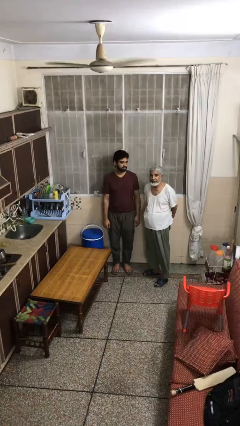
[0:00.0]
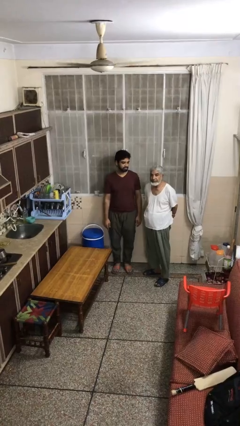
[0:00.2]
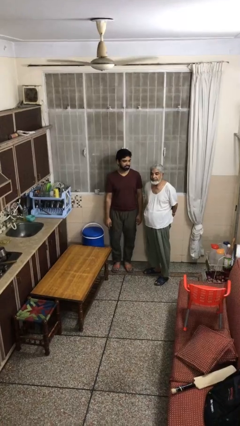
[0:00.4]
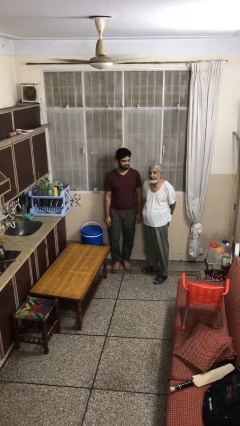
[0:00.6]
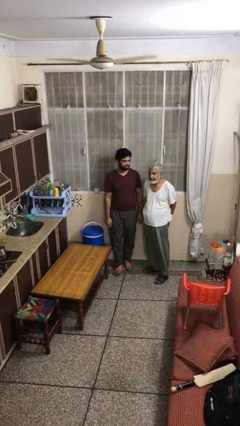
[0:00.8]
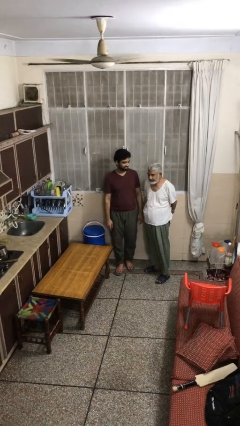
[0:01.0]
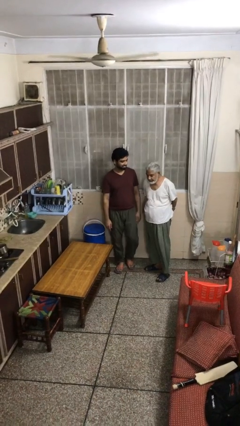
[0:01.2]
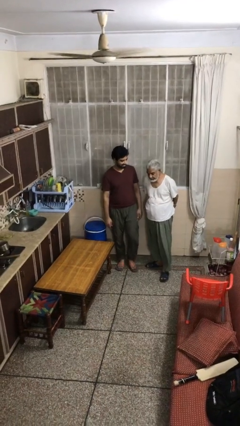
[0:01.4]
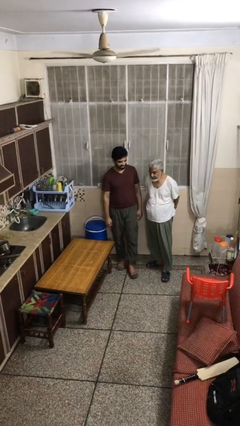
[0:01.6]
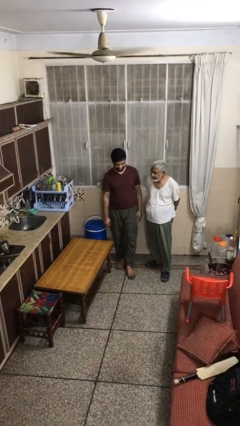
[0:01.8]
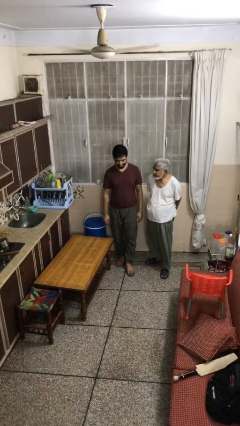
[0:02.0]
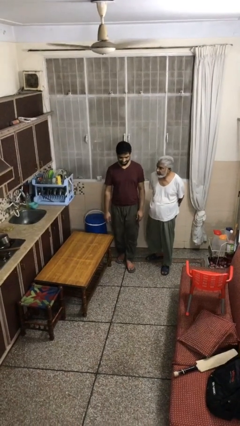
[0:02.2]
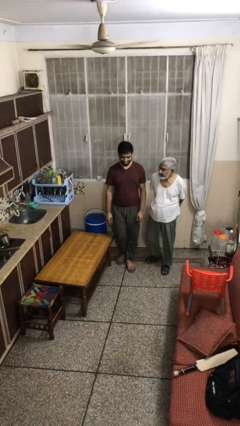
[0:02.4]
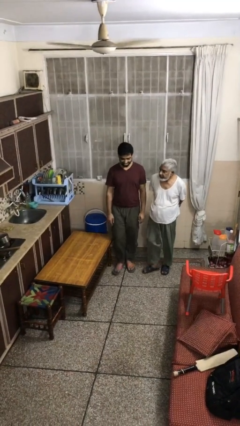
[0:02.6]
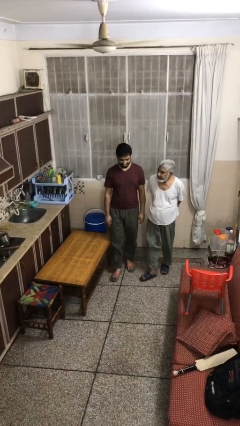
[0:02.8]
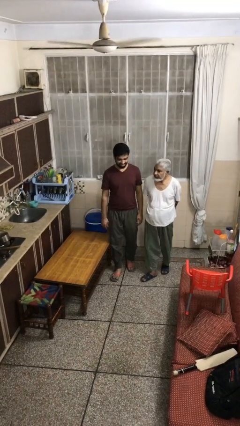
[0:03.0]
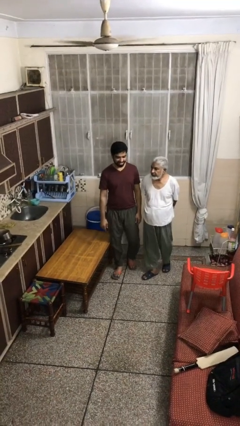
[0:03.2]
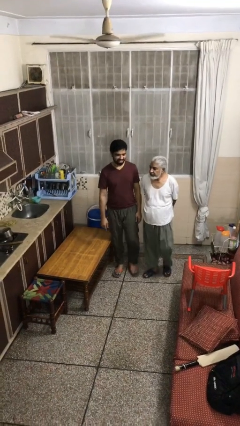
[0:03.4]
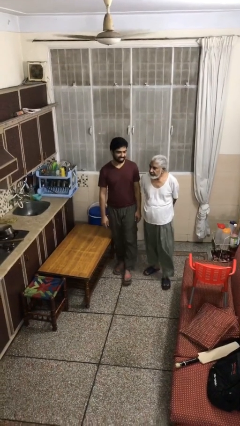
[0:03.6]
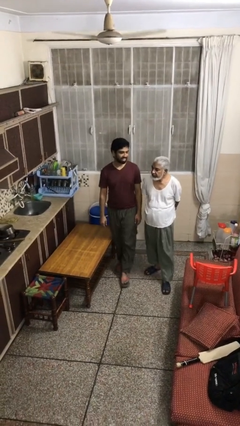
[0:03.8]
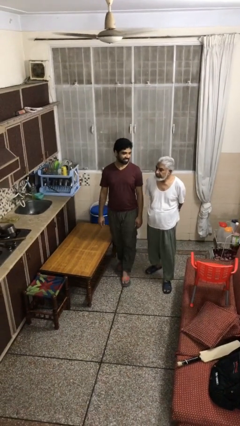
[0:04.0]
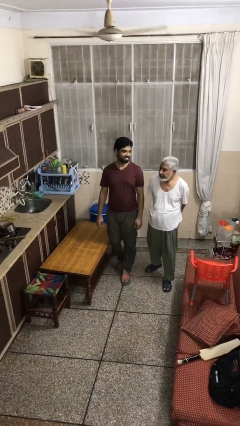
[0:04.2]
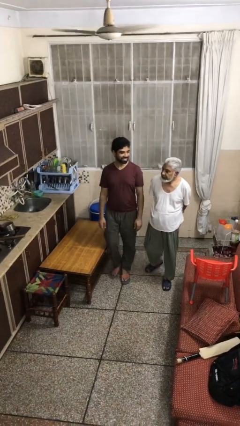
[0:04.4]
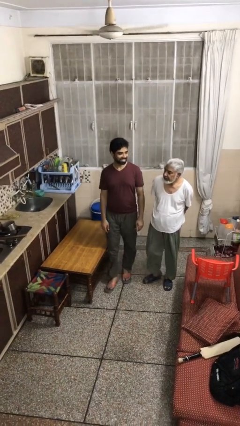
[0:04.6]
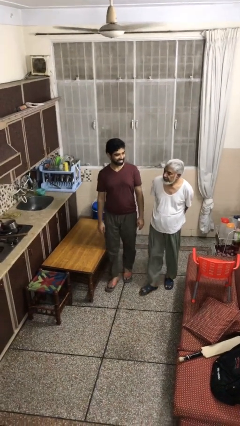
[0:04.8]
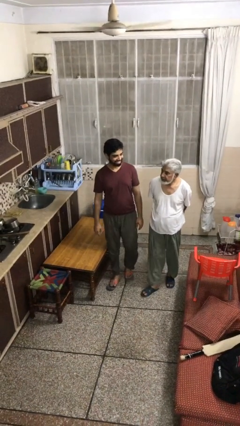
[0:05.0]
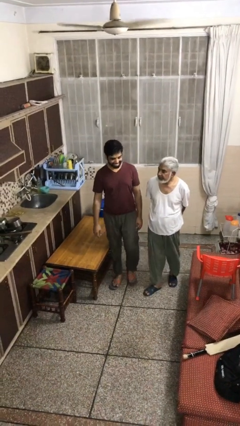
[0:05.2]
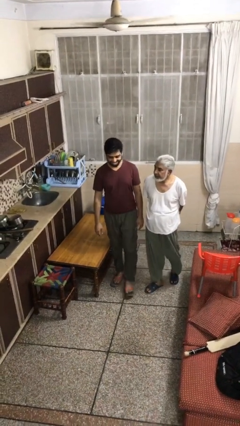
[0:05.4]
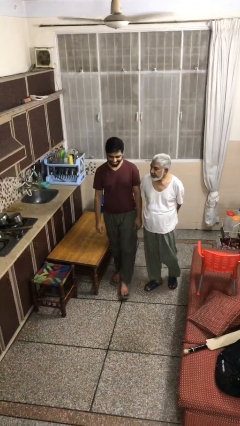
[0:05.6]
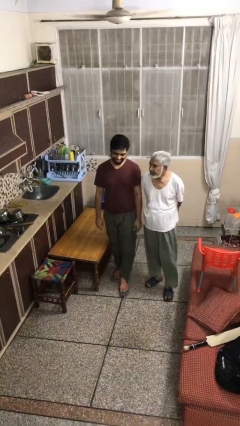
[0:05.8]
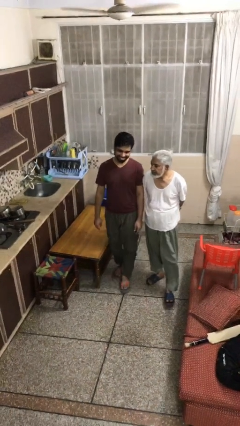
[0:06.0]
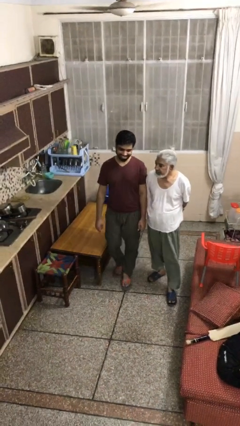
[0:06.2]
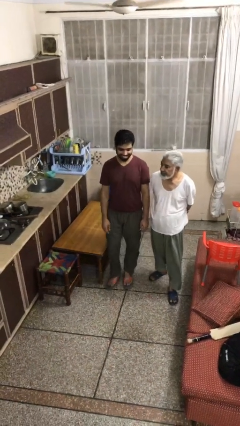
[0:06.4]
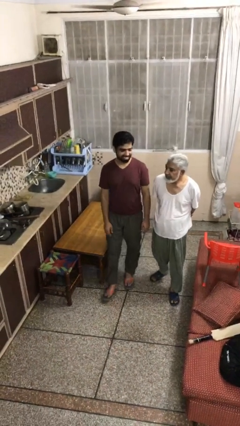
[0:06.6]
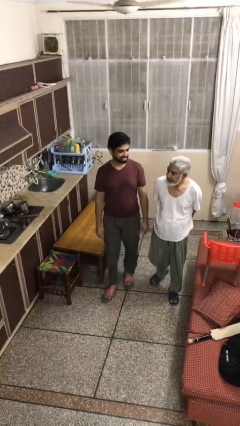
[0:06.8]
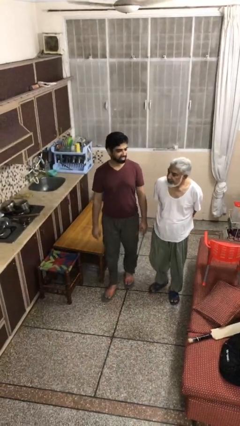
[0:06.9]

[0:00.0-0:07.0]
person talks to person

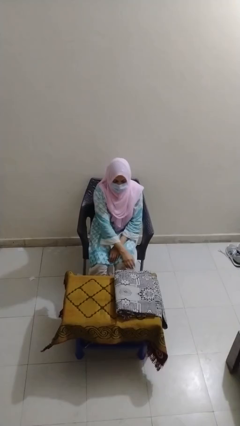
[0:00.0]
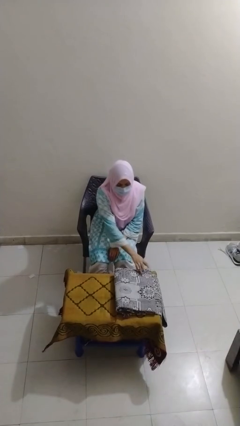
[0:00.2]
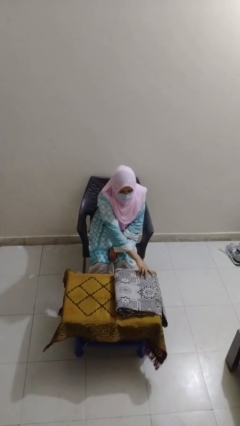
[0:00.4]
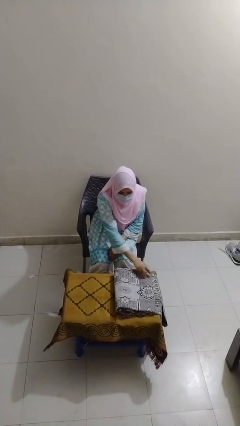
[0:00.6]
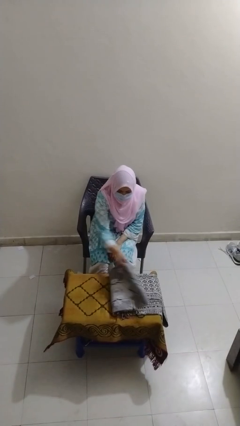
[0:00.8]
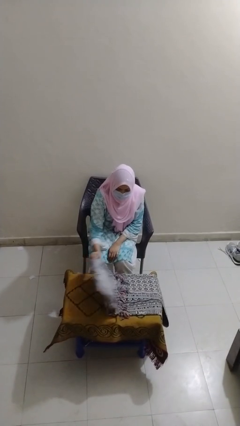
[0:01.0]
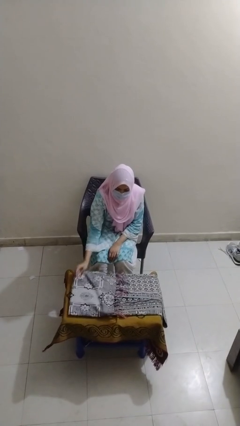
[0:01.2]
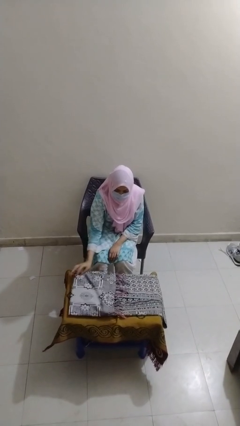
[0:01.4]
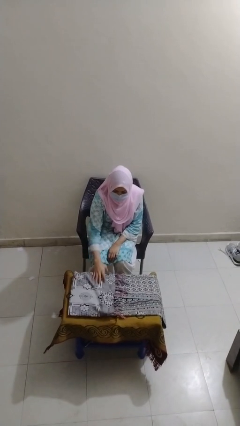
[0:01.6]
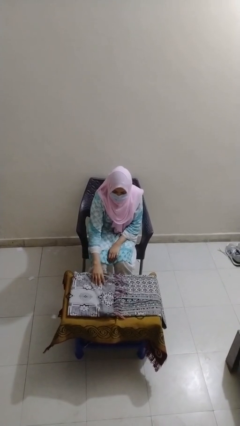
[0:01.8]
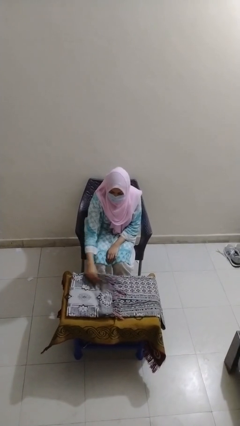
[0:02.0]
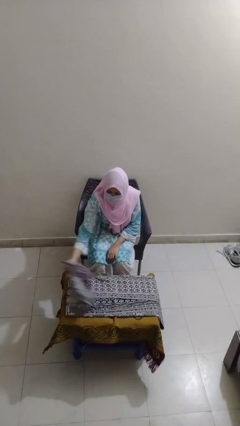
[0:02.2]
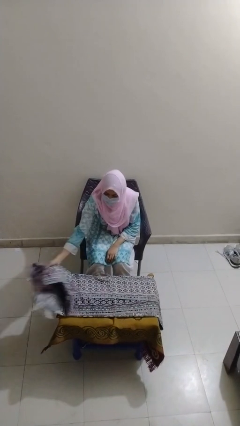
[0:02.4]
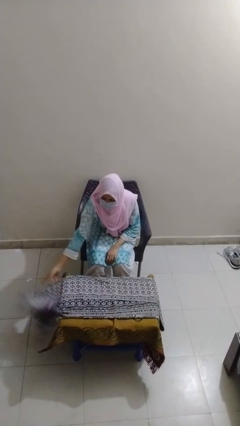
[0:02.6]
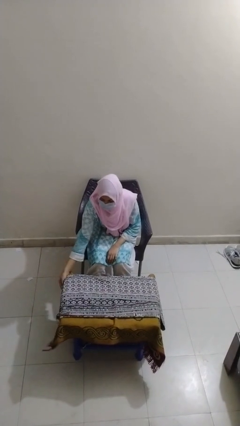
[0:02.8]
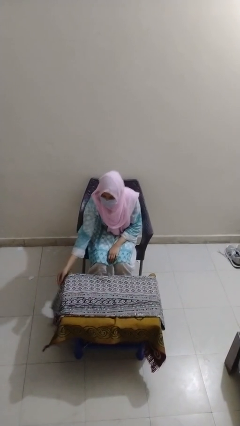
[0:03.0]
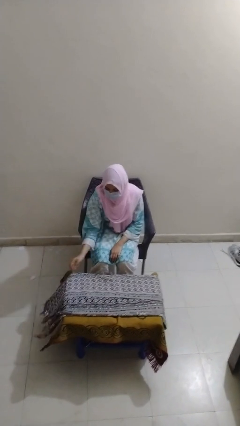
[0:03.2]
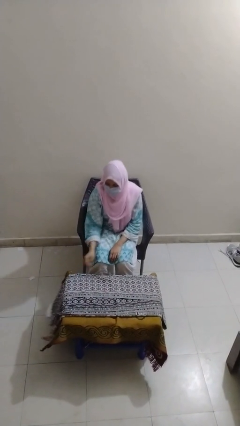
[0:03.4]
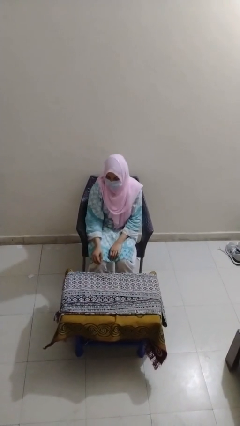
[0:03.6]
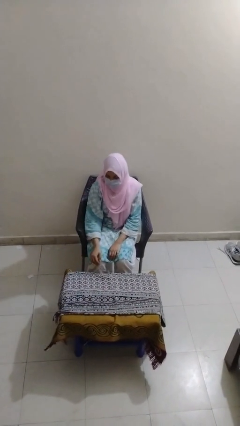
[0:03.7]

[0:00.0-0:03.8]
person unfolds blanket

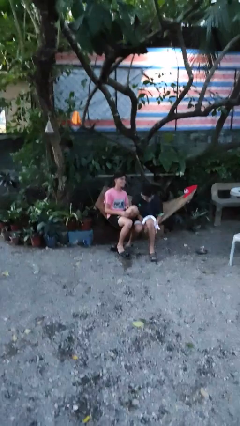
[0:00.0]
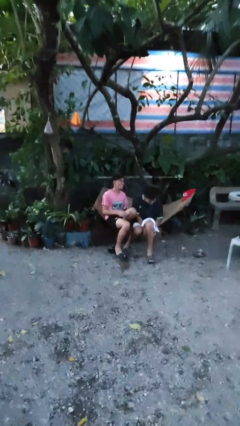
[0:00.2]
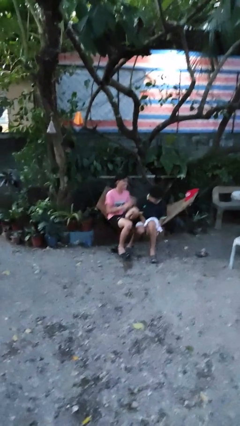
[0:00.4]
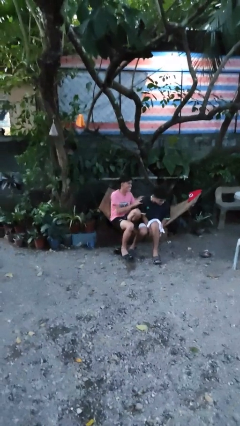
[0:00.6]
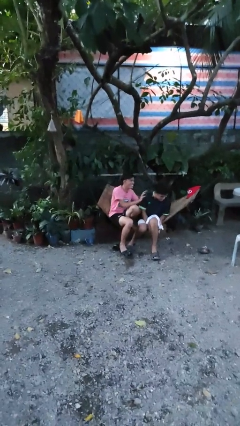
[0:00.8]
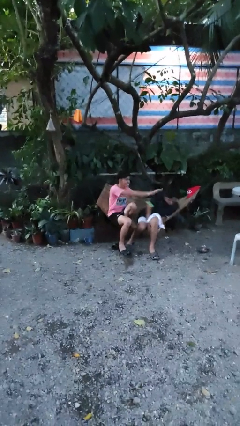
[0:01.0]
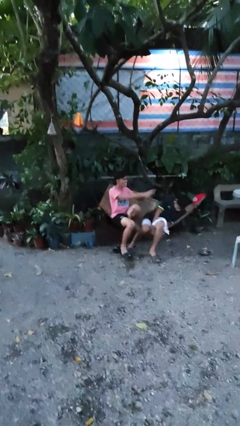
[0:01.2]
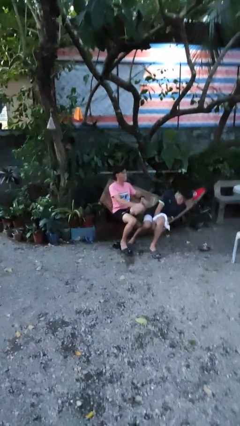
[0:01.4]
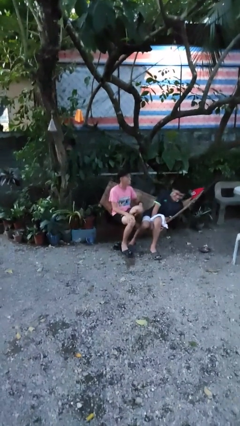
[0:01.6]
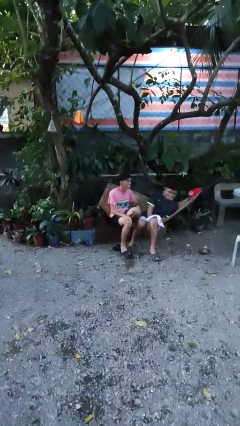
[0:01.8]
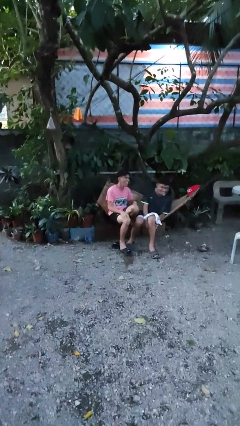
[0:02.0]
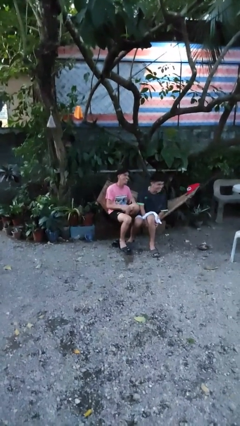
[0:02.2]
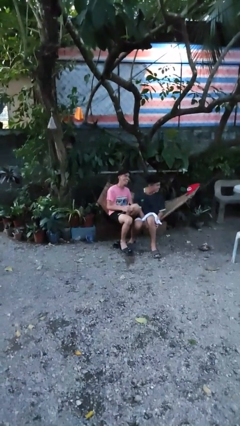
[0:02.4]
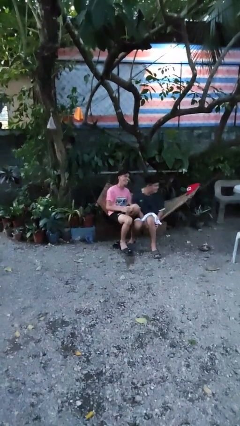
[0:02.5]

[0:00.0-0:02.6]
person shoves person

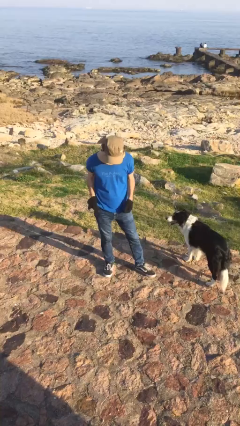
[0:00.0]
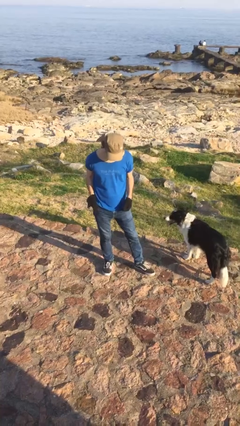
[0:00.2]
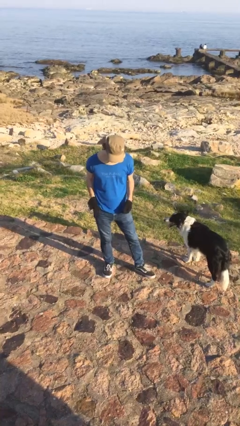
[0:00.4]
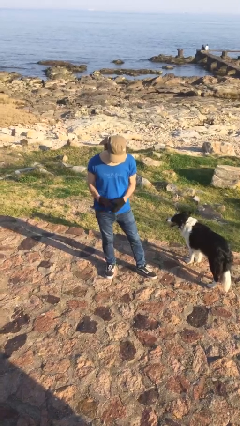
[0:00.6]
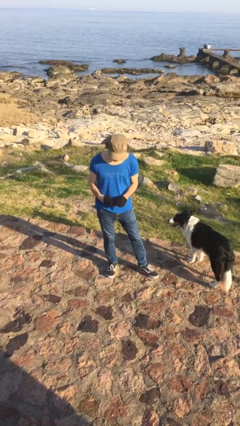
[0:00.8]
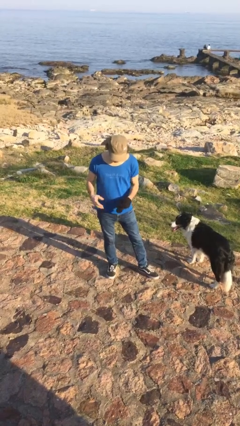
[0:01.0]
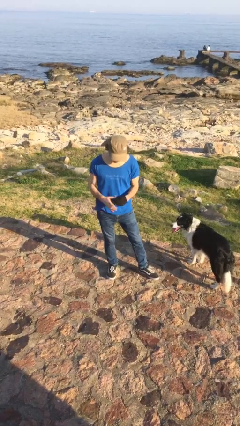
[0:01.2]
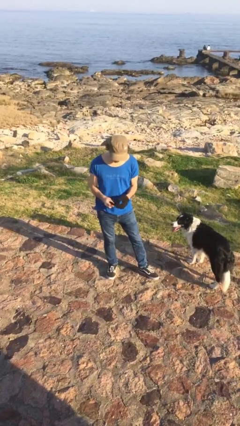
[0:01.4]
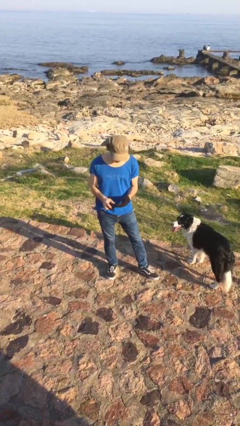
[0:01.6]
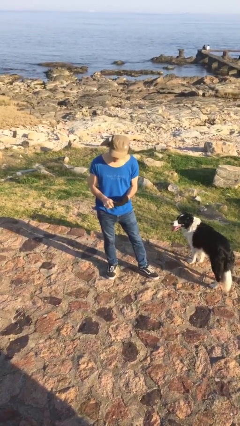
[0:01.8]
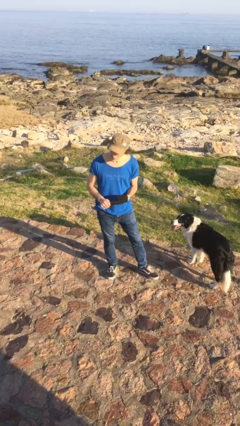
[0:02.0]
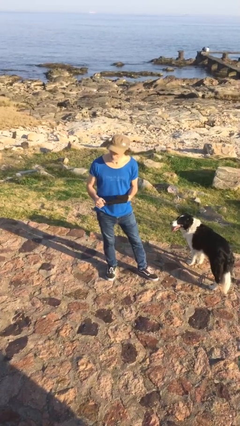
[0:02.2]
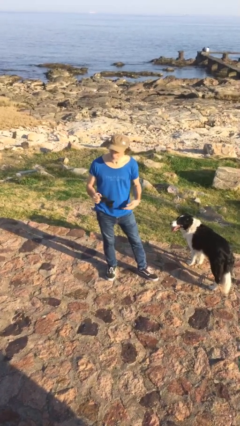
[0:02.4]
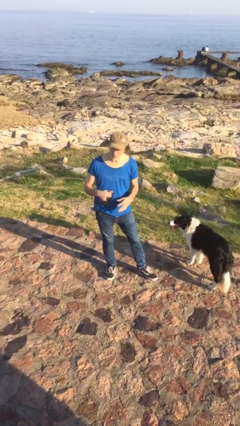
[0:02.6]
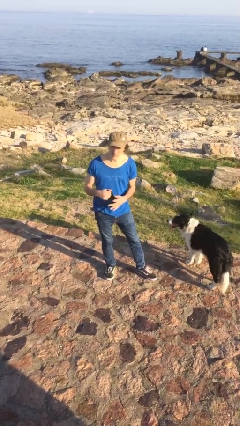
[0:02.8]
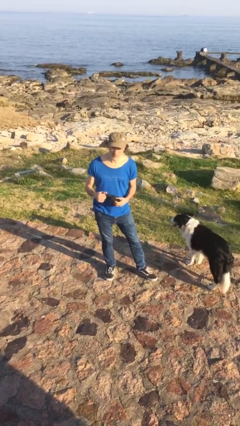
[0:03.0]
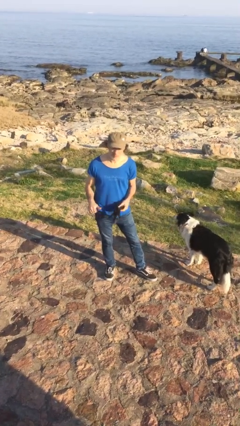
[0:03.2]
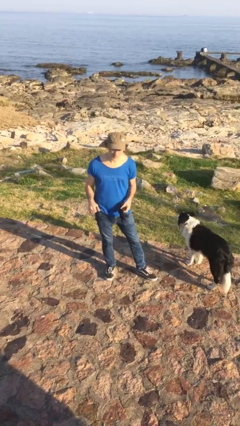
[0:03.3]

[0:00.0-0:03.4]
person takes off gloves

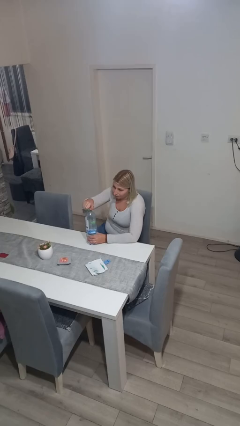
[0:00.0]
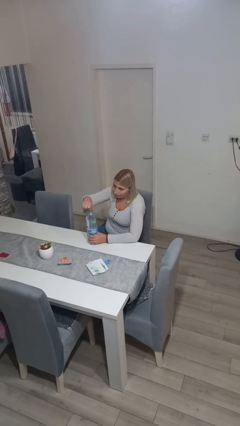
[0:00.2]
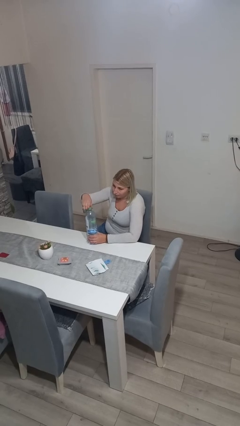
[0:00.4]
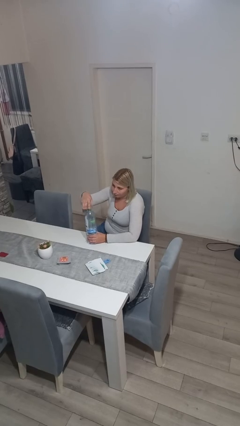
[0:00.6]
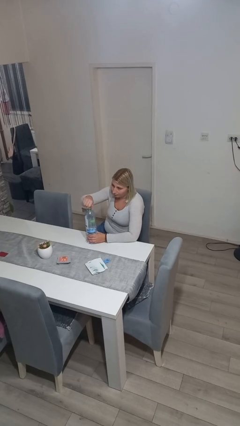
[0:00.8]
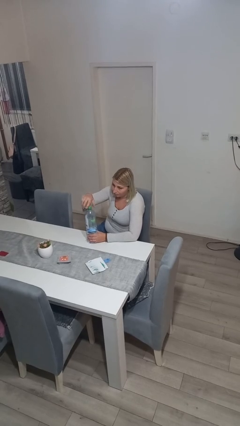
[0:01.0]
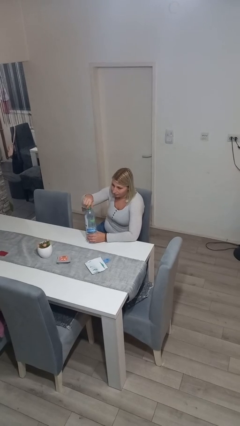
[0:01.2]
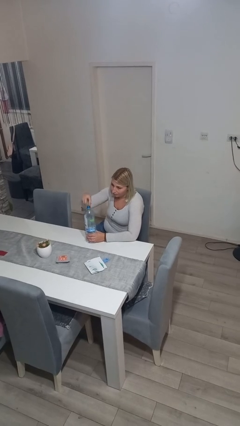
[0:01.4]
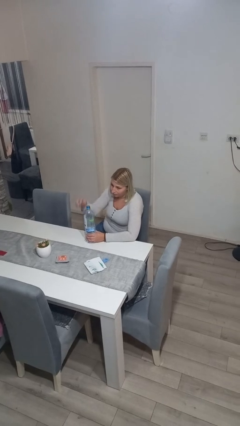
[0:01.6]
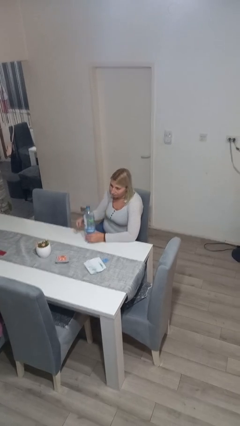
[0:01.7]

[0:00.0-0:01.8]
person unscrews lid from bottle
